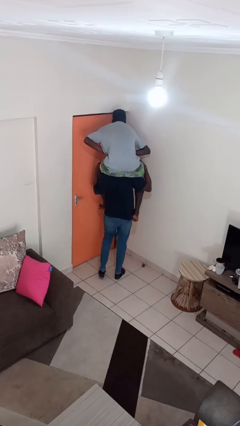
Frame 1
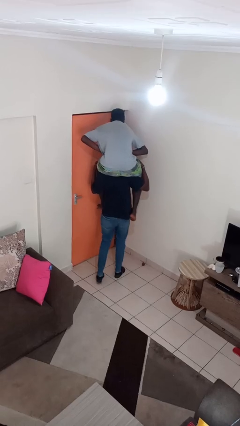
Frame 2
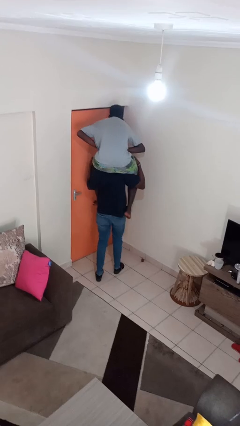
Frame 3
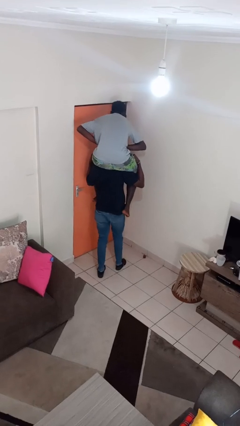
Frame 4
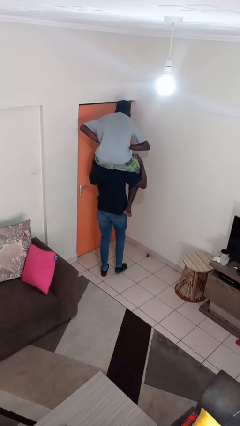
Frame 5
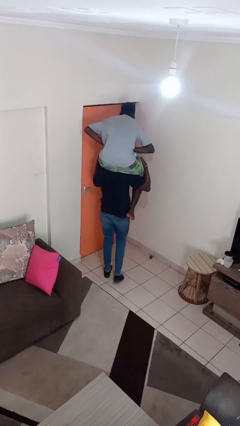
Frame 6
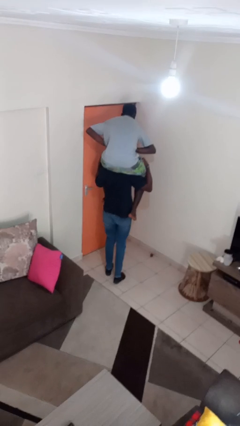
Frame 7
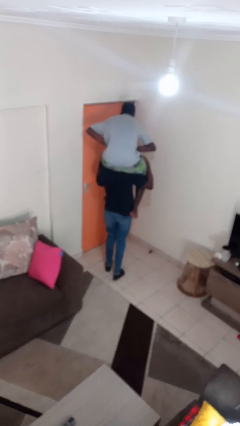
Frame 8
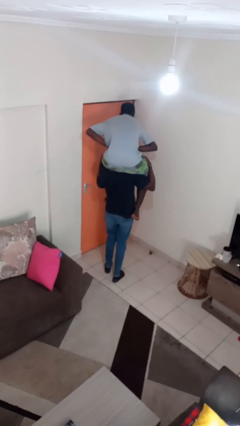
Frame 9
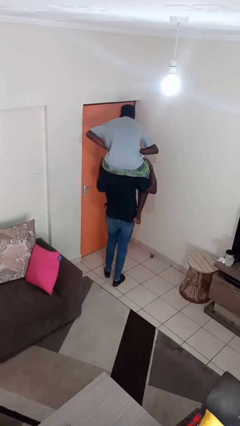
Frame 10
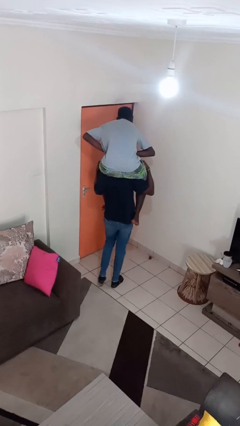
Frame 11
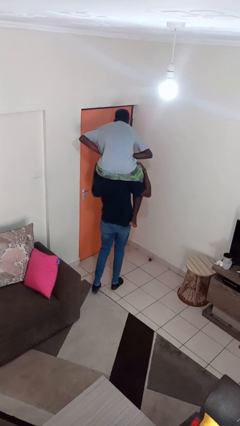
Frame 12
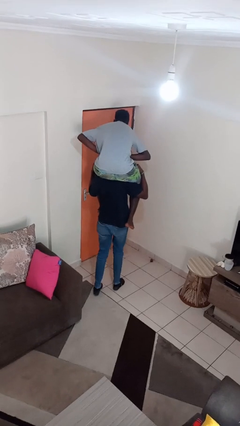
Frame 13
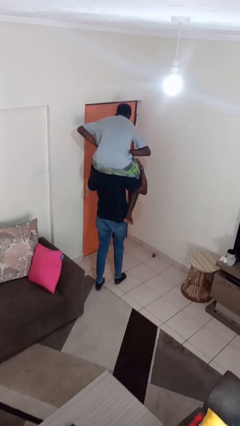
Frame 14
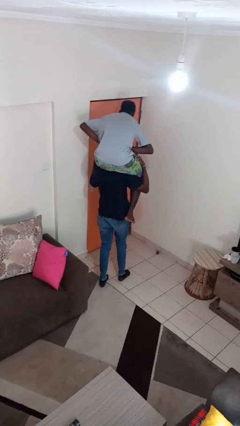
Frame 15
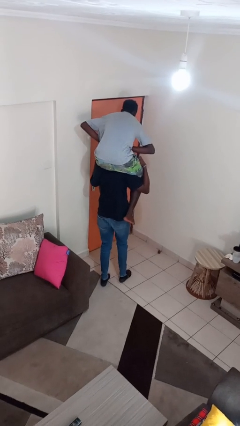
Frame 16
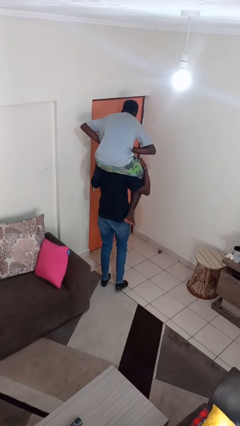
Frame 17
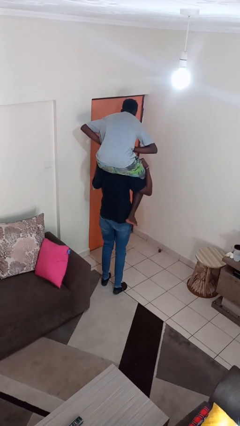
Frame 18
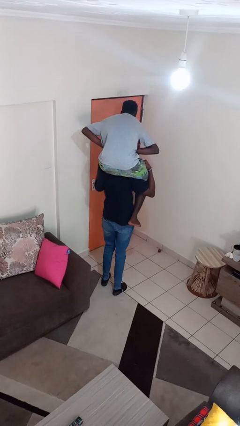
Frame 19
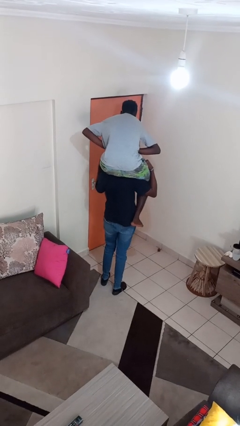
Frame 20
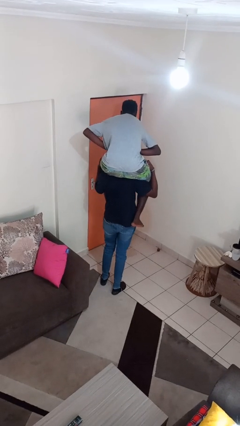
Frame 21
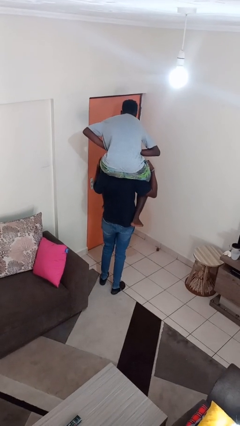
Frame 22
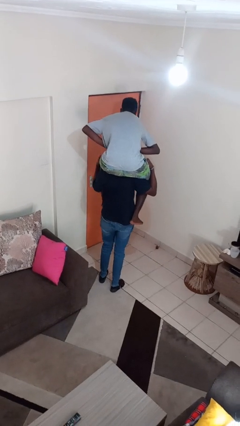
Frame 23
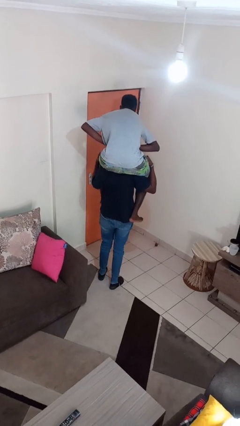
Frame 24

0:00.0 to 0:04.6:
person carries person on shoulders

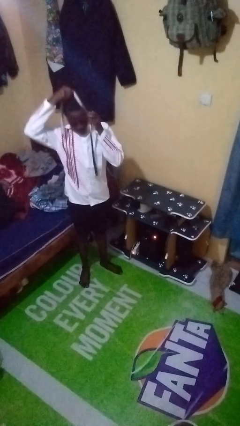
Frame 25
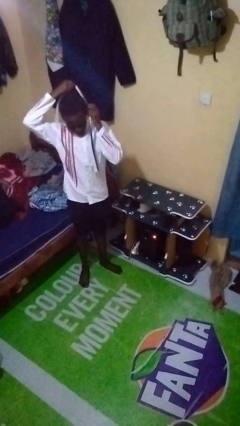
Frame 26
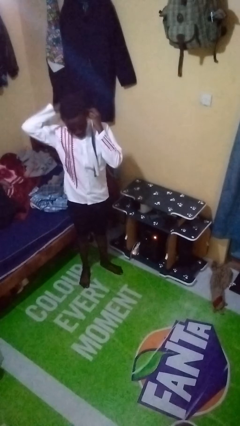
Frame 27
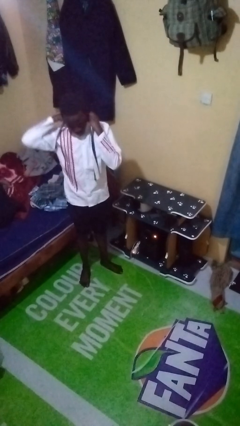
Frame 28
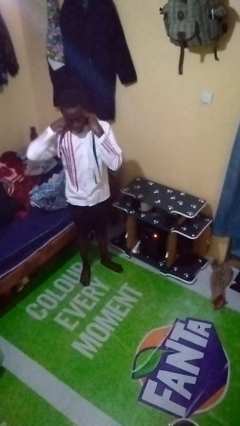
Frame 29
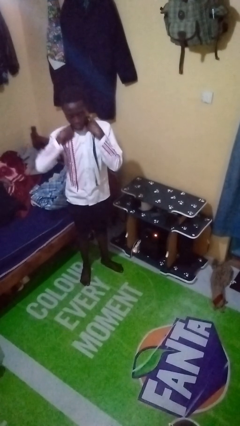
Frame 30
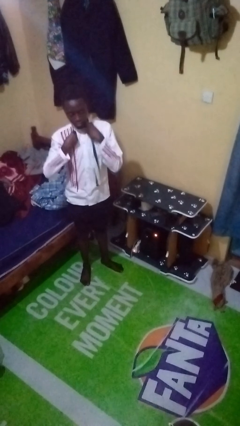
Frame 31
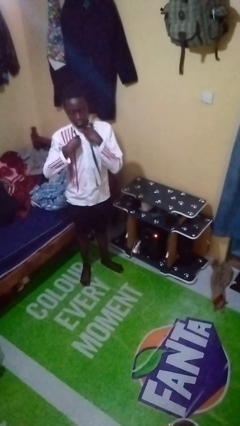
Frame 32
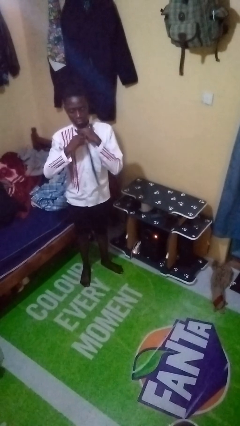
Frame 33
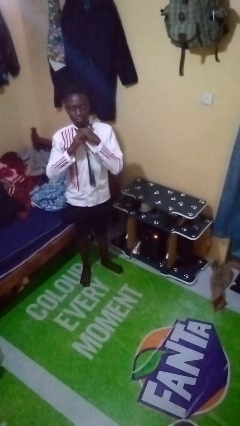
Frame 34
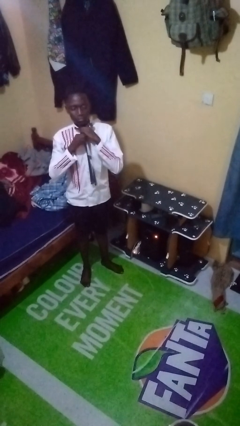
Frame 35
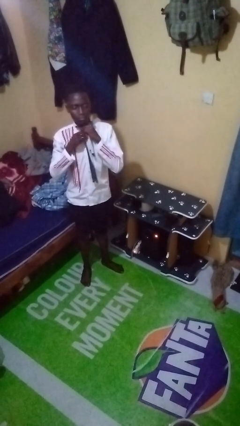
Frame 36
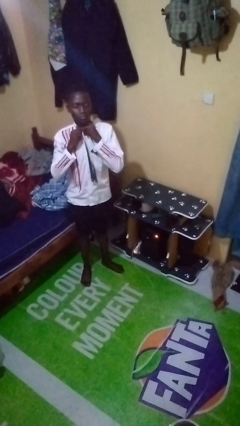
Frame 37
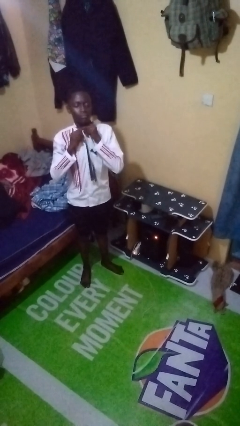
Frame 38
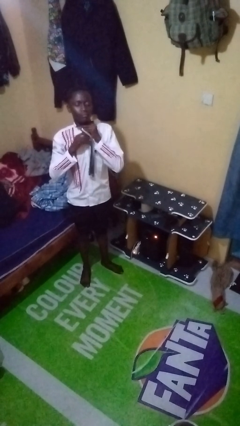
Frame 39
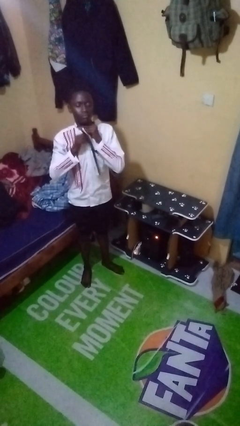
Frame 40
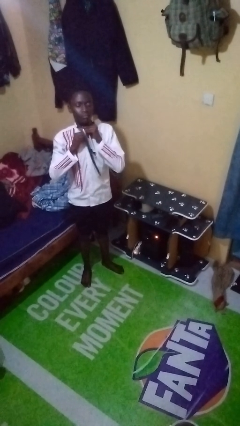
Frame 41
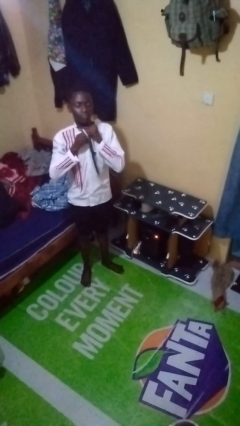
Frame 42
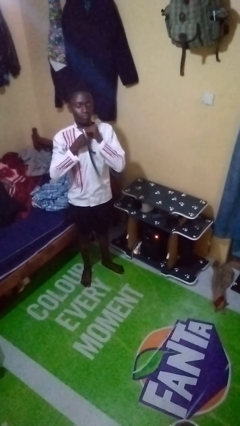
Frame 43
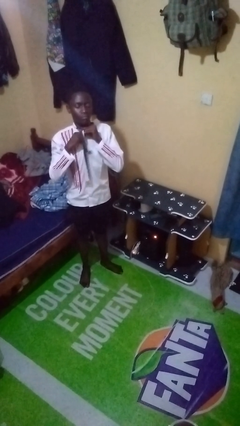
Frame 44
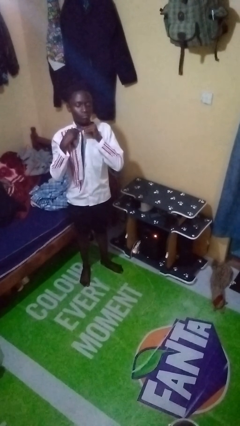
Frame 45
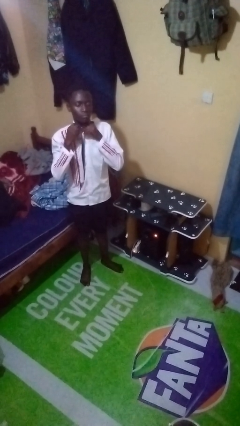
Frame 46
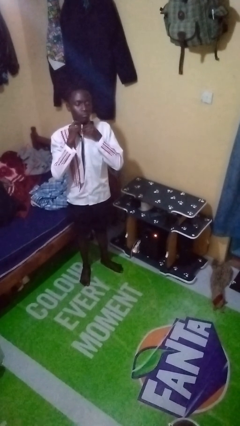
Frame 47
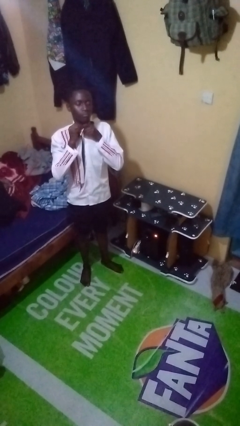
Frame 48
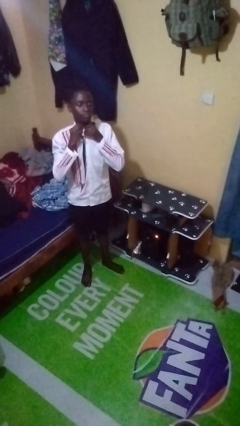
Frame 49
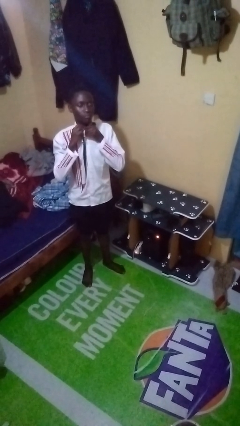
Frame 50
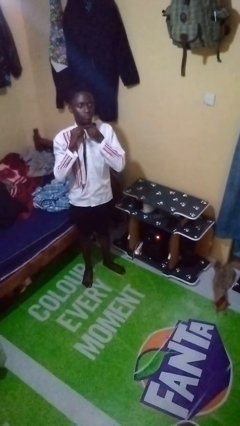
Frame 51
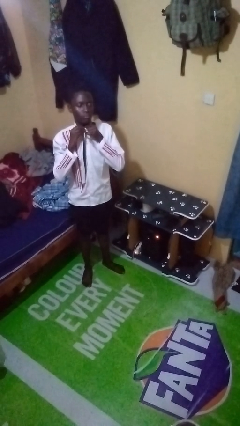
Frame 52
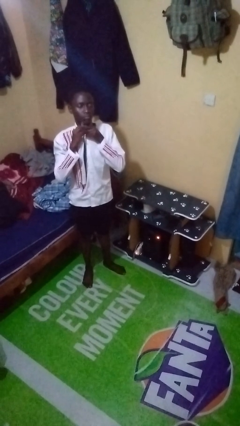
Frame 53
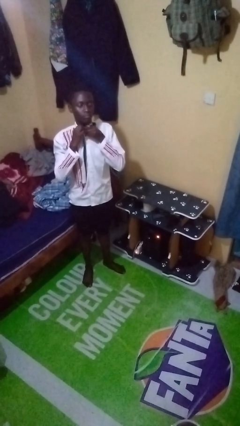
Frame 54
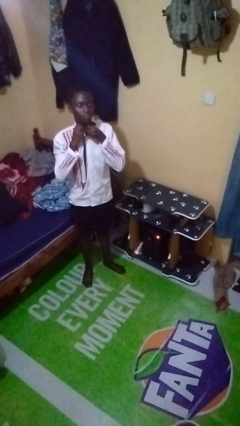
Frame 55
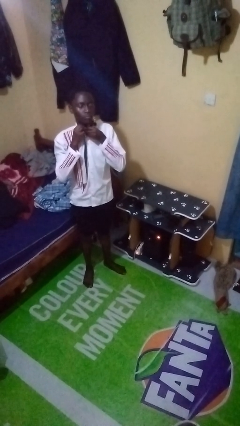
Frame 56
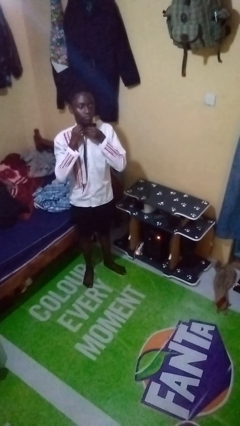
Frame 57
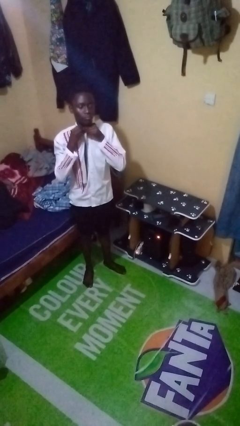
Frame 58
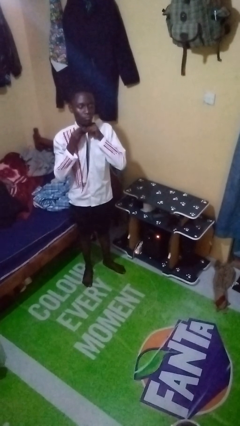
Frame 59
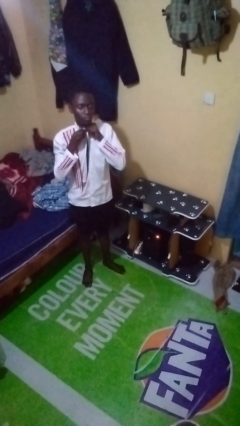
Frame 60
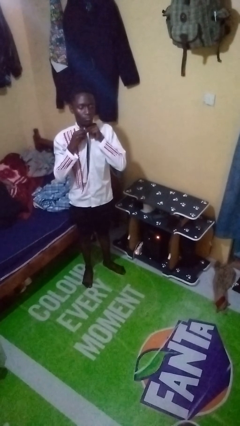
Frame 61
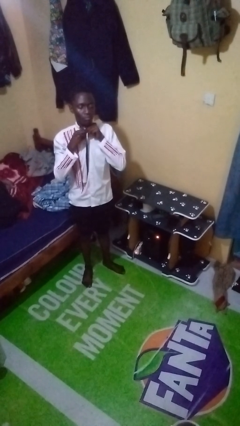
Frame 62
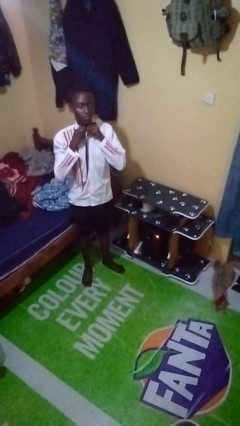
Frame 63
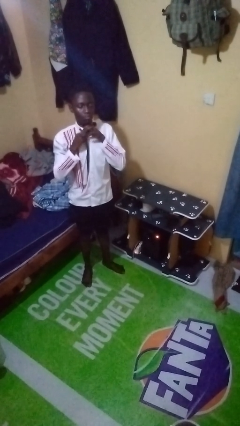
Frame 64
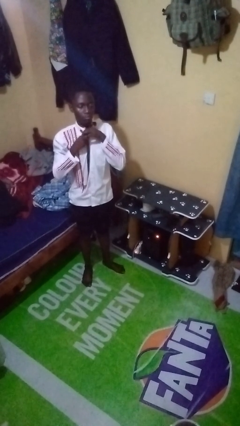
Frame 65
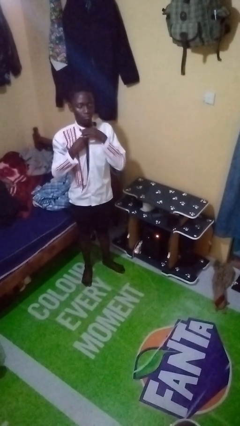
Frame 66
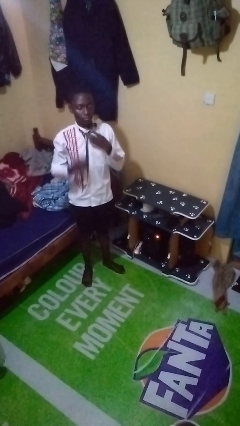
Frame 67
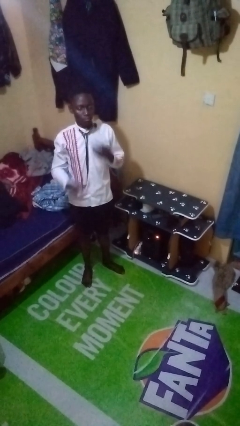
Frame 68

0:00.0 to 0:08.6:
person puts on necktie

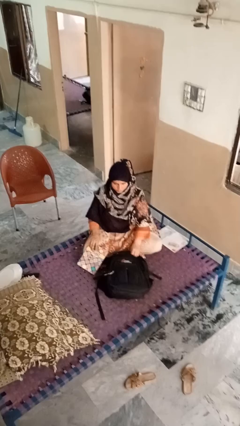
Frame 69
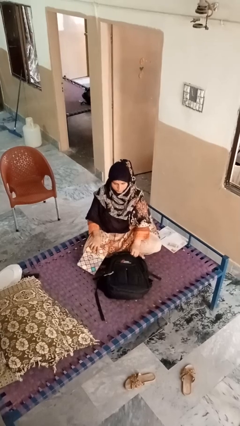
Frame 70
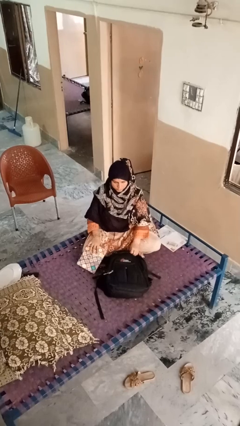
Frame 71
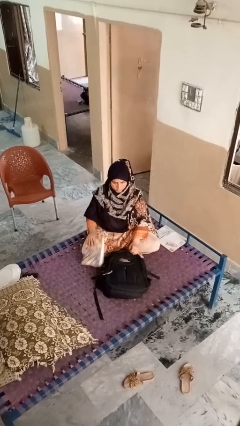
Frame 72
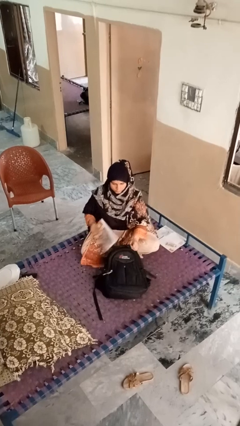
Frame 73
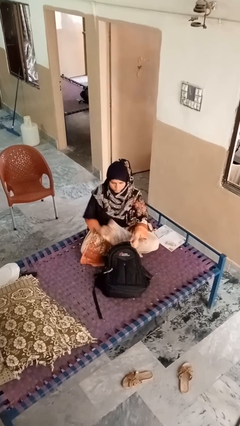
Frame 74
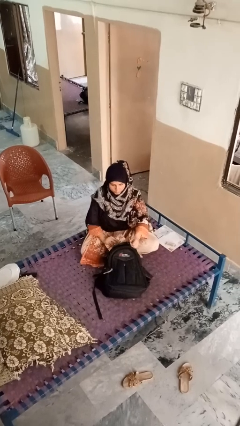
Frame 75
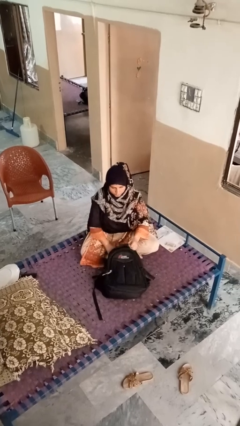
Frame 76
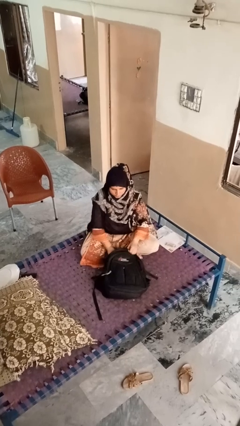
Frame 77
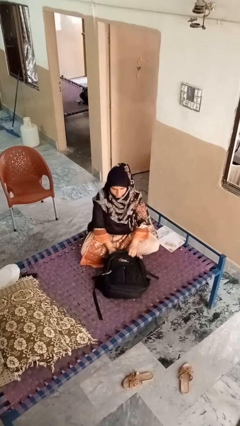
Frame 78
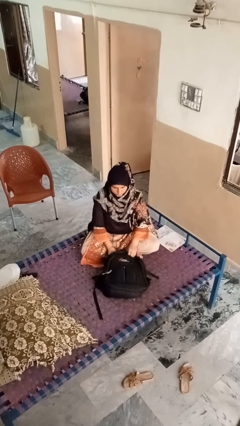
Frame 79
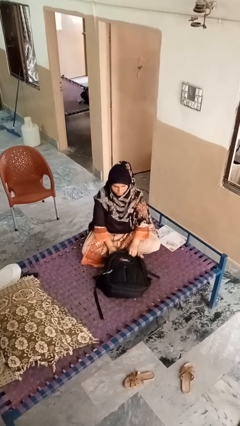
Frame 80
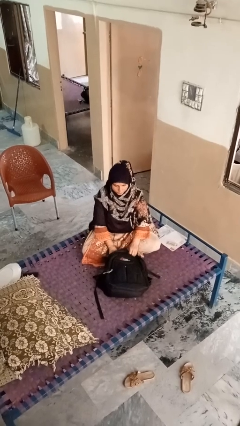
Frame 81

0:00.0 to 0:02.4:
person puts object into bag

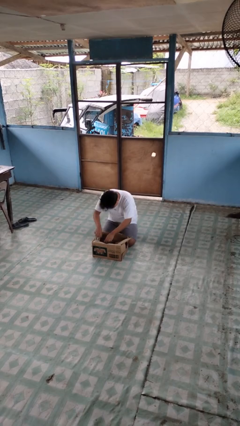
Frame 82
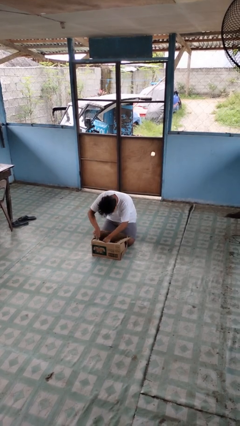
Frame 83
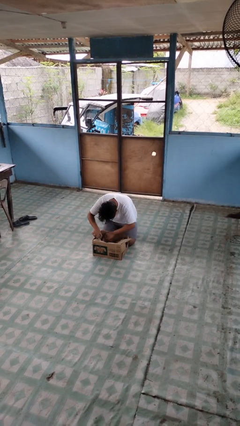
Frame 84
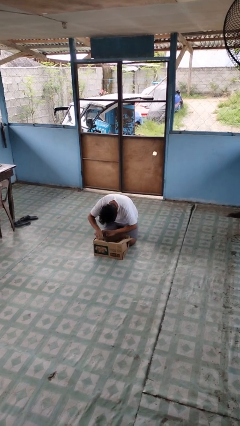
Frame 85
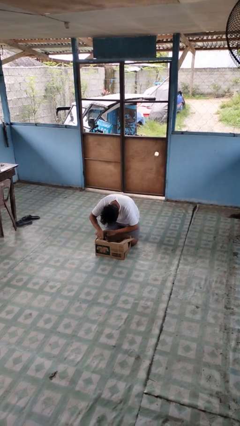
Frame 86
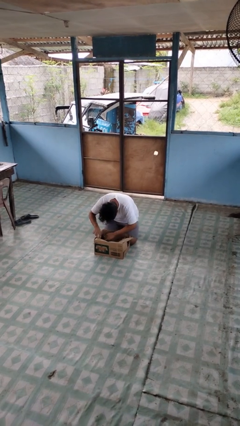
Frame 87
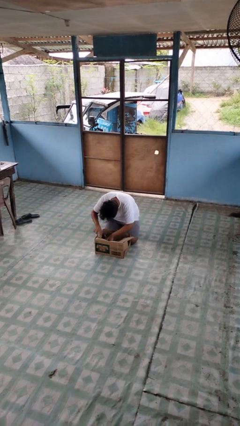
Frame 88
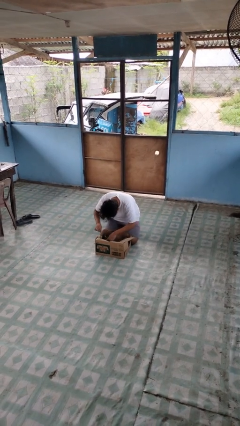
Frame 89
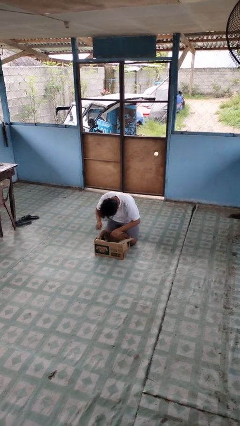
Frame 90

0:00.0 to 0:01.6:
person searches in box

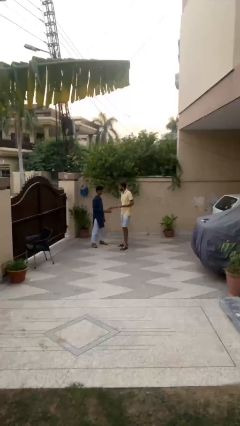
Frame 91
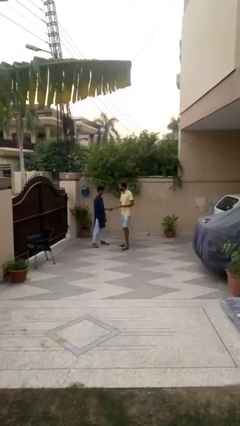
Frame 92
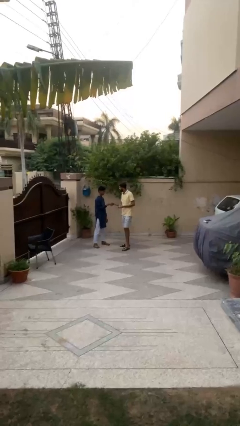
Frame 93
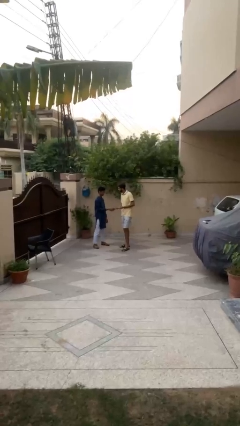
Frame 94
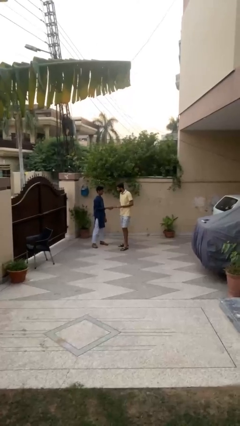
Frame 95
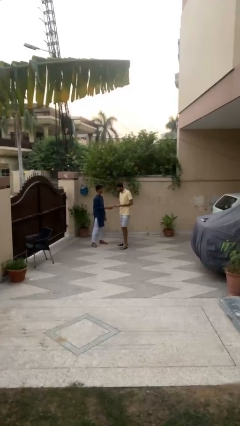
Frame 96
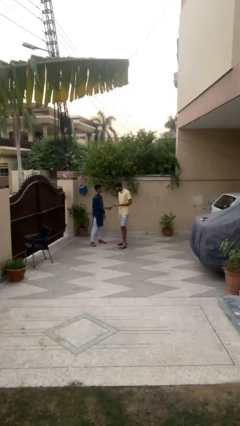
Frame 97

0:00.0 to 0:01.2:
person shakes hand
